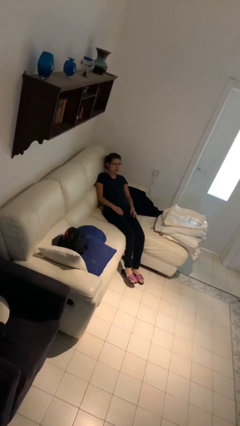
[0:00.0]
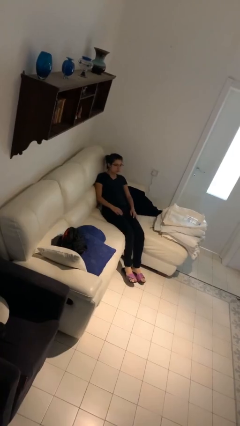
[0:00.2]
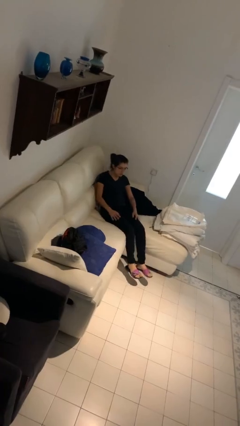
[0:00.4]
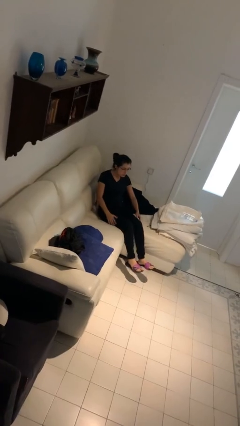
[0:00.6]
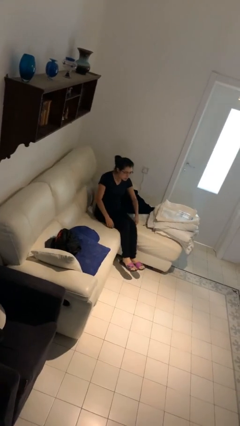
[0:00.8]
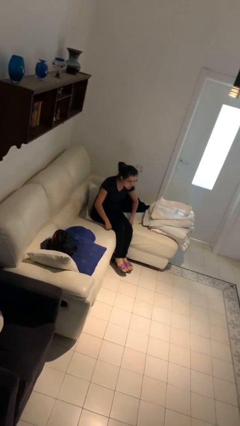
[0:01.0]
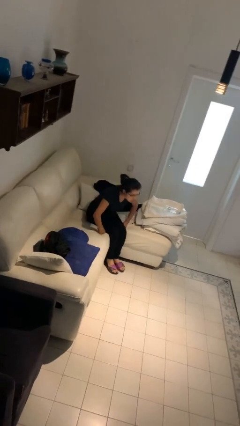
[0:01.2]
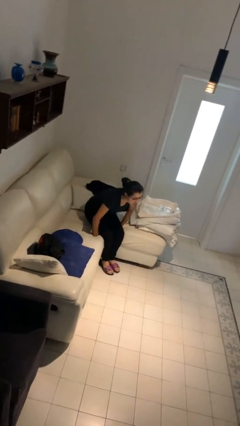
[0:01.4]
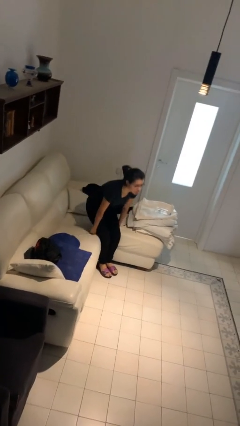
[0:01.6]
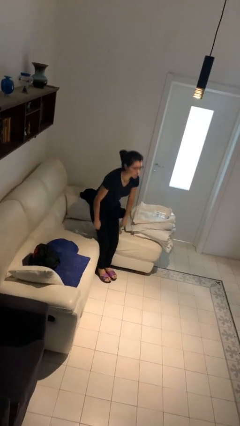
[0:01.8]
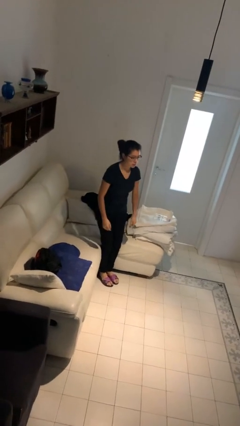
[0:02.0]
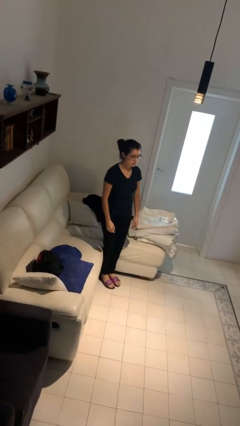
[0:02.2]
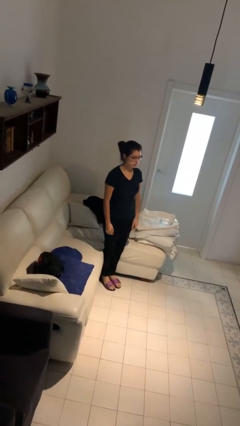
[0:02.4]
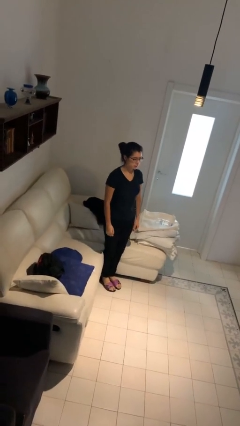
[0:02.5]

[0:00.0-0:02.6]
person stands up

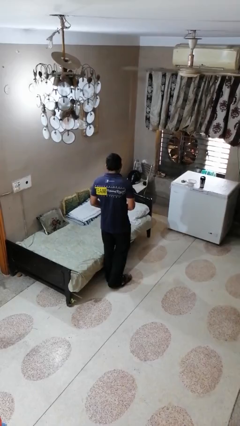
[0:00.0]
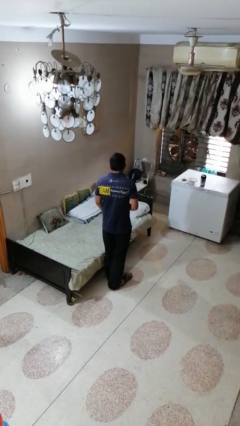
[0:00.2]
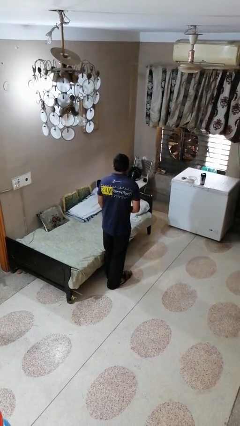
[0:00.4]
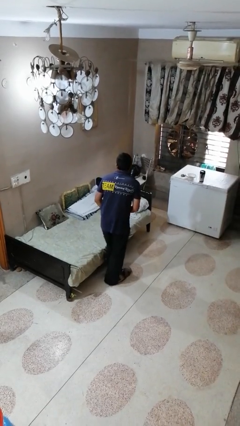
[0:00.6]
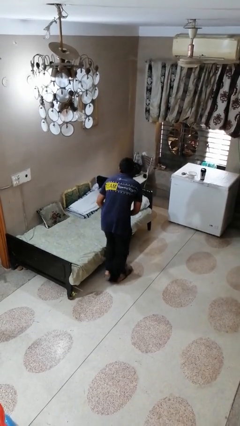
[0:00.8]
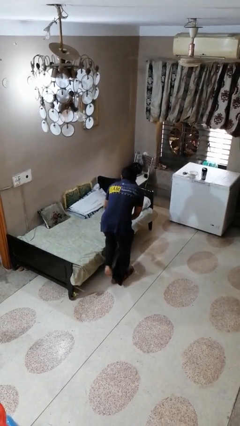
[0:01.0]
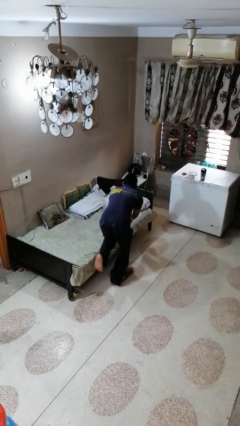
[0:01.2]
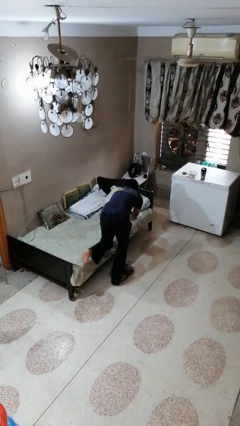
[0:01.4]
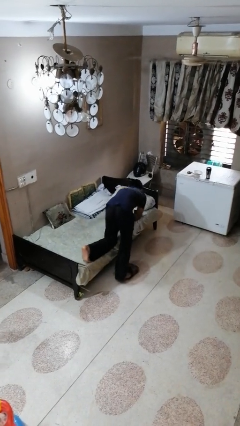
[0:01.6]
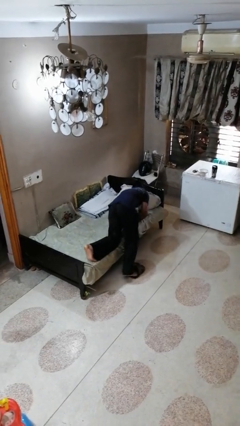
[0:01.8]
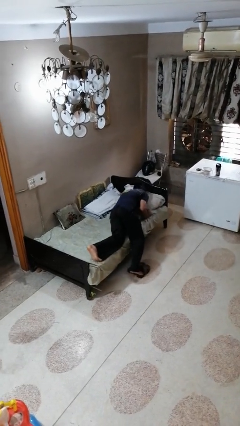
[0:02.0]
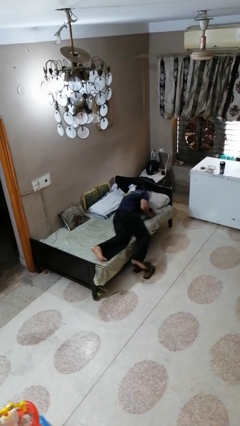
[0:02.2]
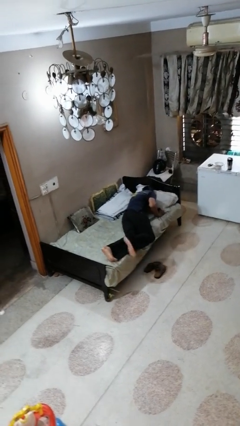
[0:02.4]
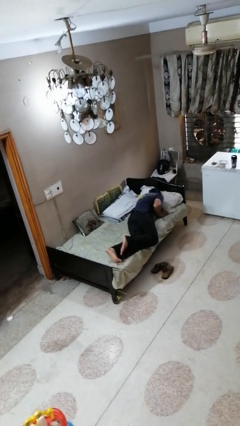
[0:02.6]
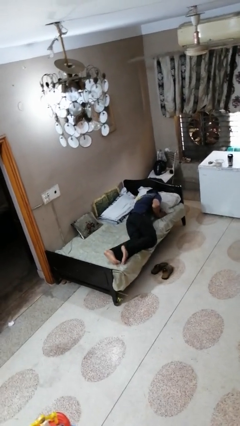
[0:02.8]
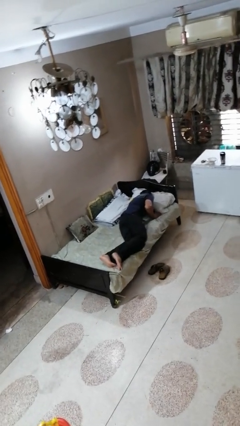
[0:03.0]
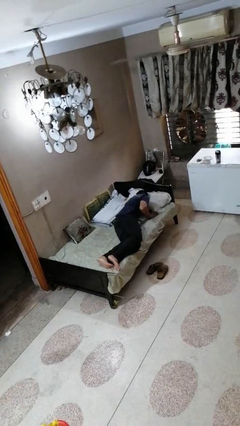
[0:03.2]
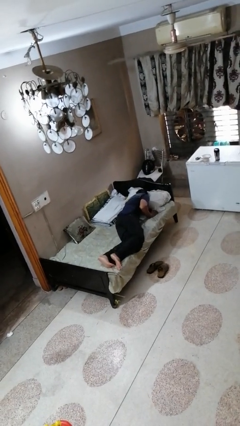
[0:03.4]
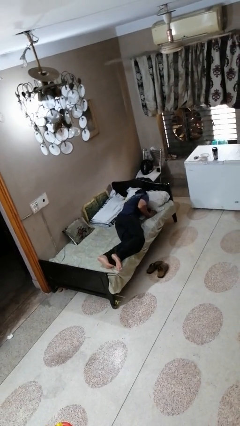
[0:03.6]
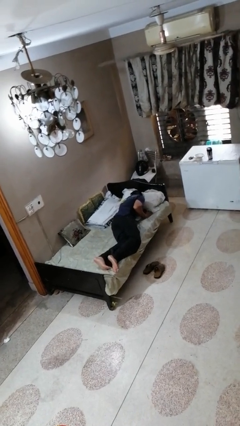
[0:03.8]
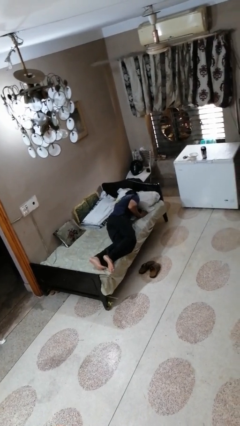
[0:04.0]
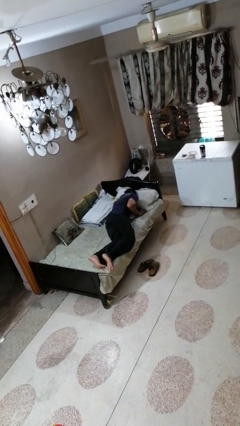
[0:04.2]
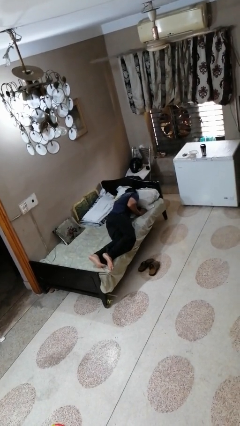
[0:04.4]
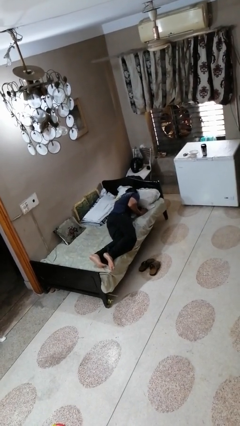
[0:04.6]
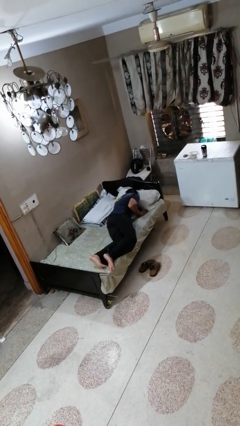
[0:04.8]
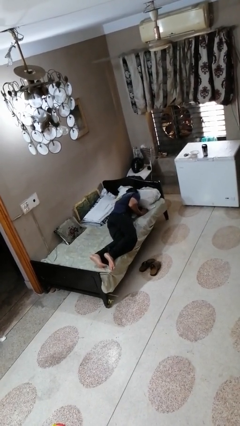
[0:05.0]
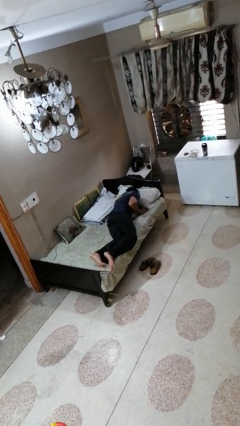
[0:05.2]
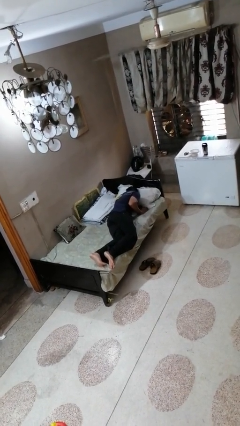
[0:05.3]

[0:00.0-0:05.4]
person lies down on bed

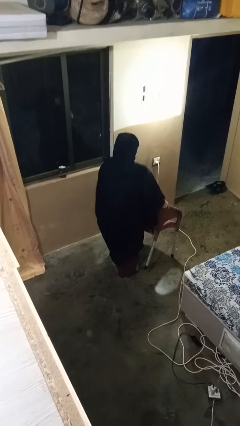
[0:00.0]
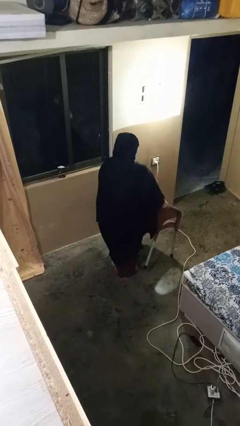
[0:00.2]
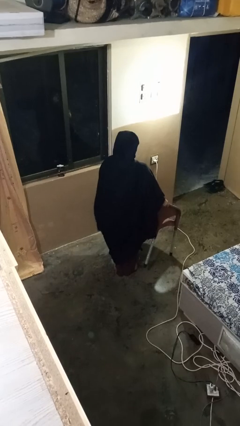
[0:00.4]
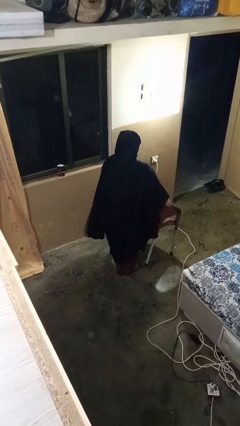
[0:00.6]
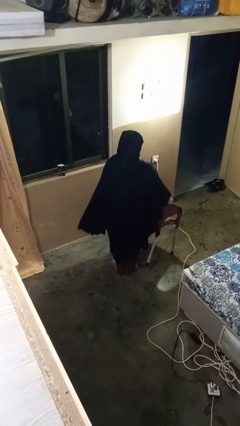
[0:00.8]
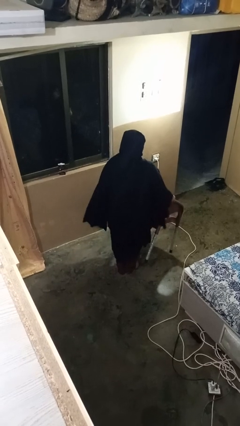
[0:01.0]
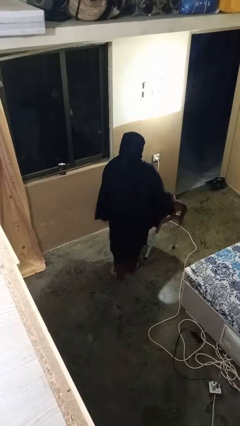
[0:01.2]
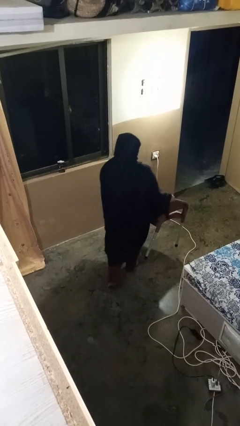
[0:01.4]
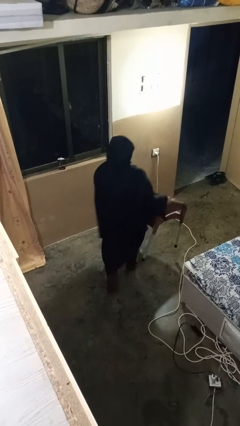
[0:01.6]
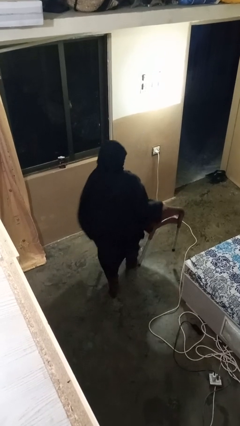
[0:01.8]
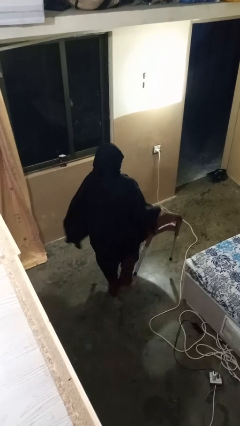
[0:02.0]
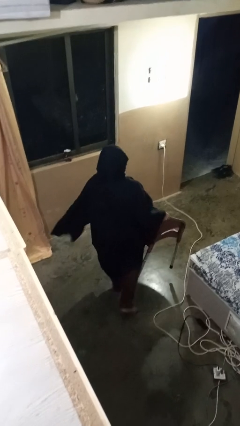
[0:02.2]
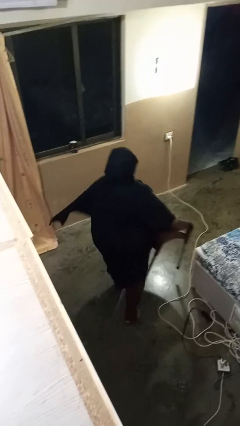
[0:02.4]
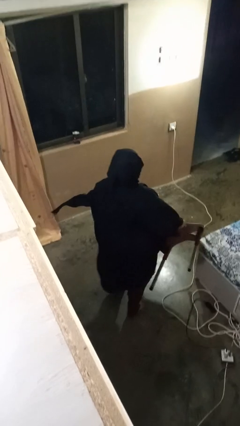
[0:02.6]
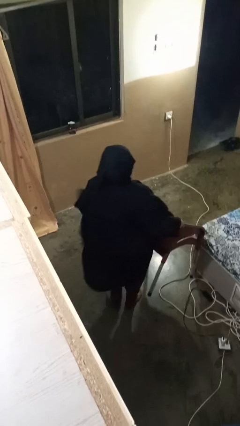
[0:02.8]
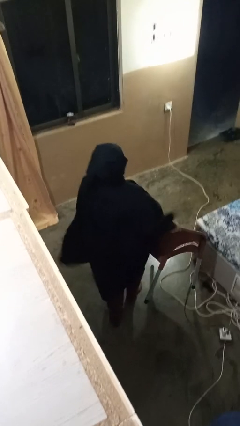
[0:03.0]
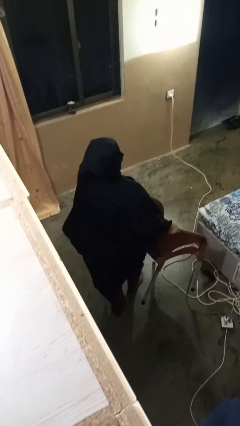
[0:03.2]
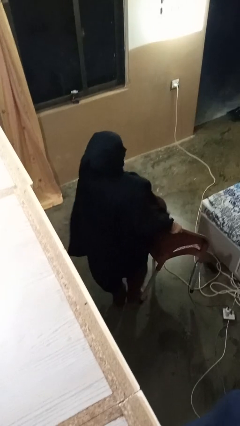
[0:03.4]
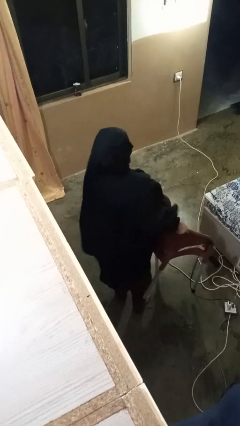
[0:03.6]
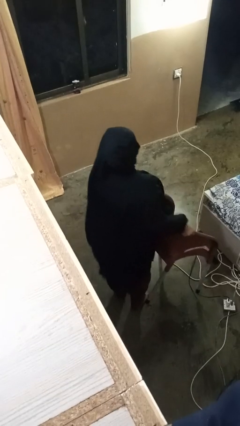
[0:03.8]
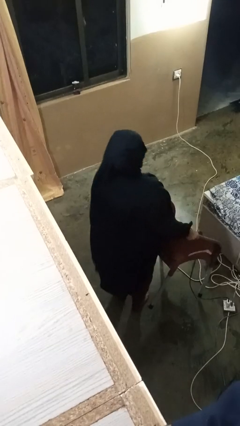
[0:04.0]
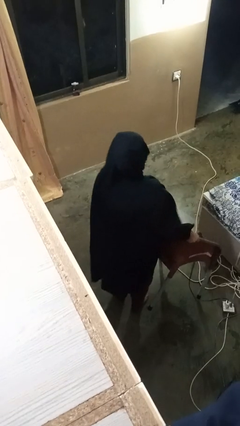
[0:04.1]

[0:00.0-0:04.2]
person carries furniture

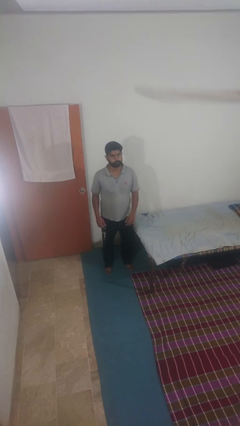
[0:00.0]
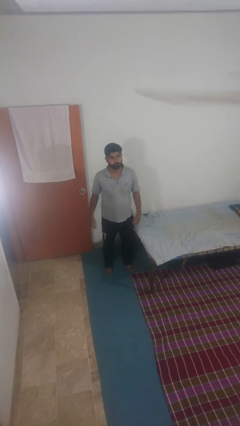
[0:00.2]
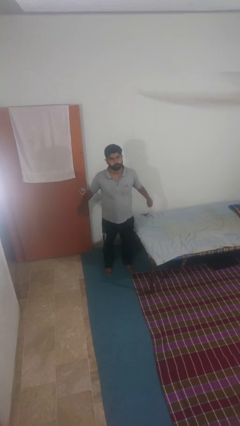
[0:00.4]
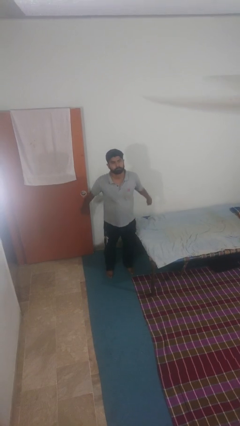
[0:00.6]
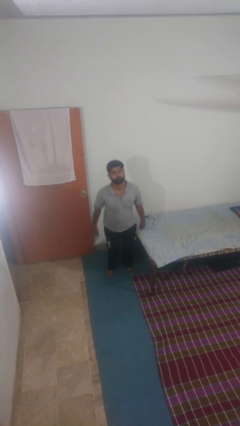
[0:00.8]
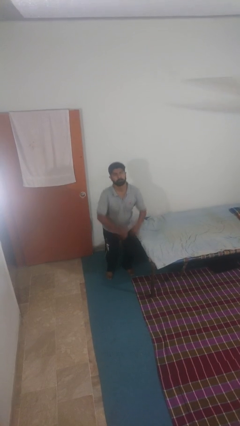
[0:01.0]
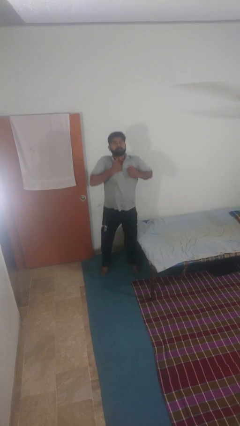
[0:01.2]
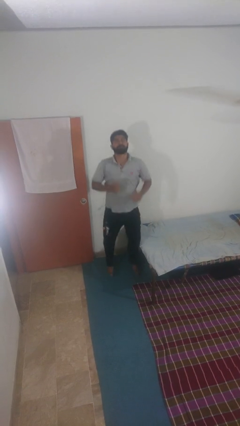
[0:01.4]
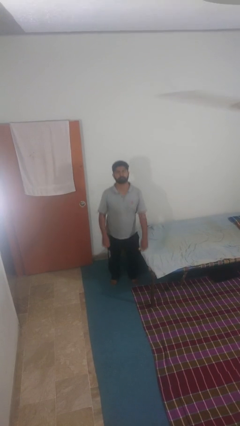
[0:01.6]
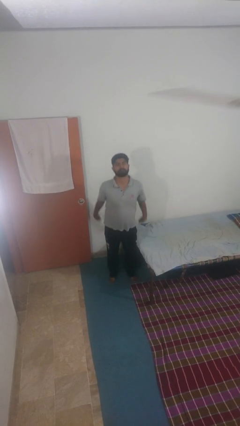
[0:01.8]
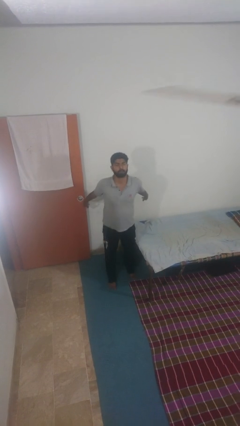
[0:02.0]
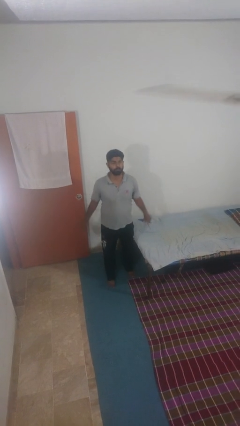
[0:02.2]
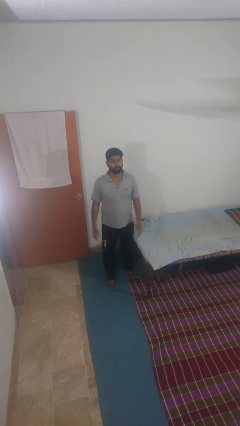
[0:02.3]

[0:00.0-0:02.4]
person jumps

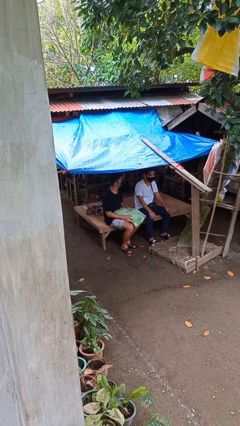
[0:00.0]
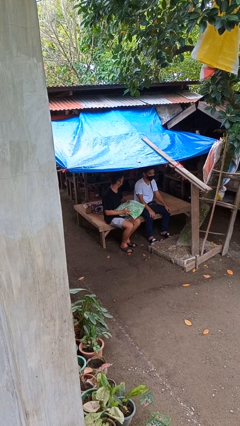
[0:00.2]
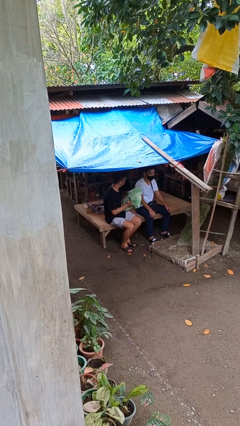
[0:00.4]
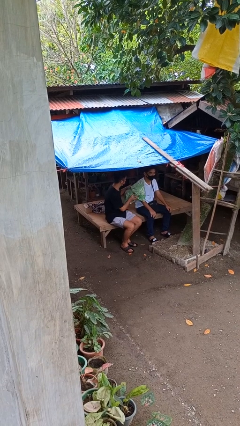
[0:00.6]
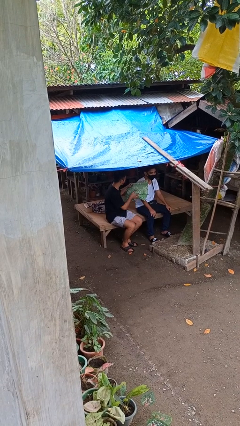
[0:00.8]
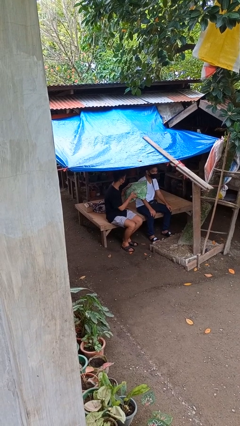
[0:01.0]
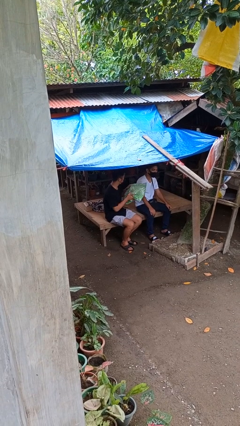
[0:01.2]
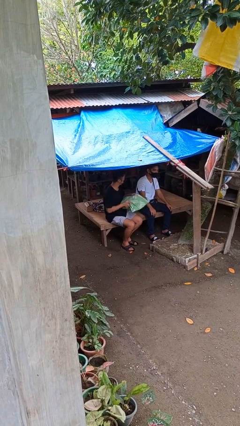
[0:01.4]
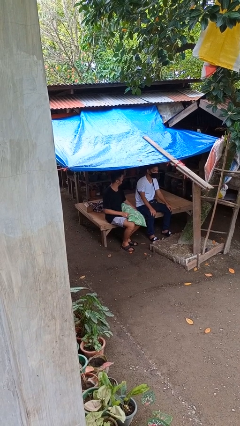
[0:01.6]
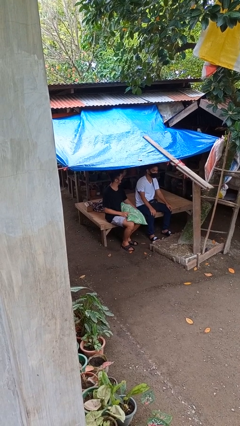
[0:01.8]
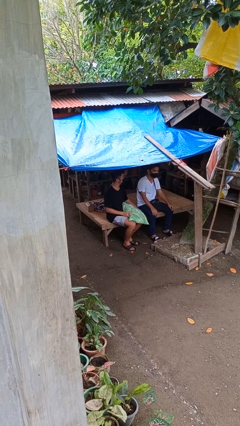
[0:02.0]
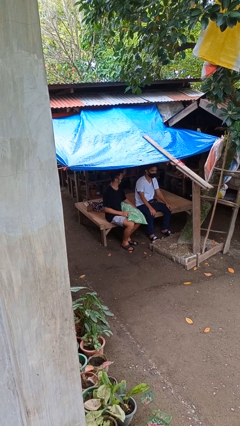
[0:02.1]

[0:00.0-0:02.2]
person hits person with pillow

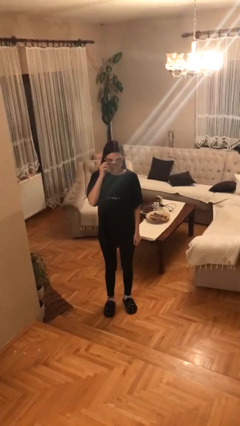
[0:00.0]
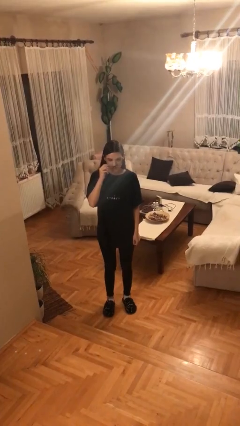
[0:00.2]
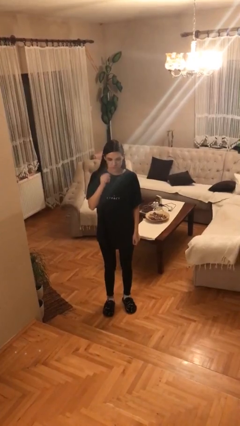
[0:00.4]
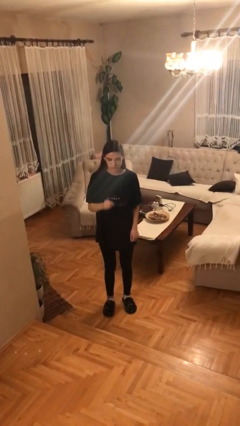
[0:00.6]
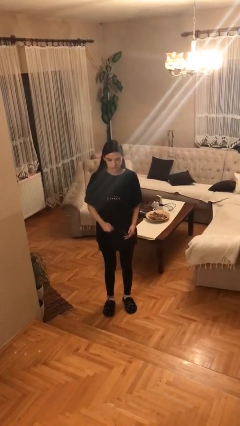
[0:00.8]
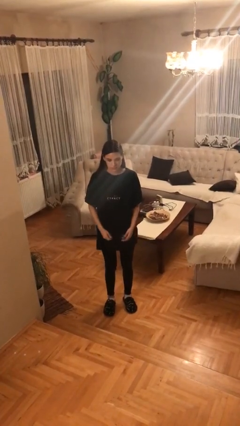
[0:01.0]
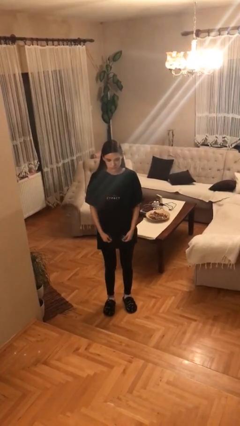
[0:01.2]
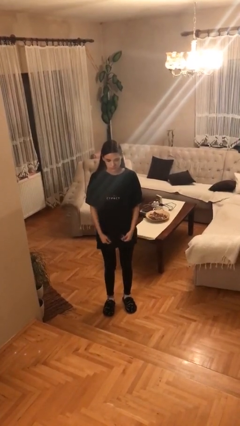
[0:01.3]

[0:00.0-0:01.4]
person takes off glasses
